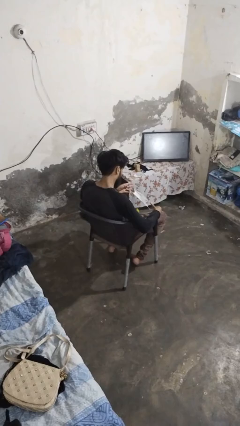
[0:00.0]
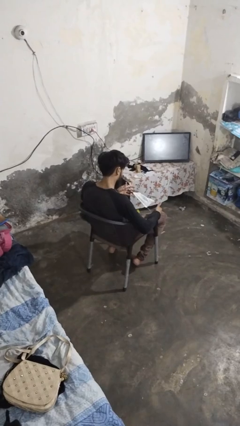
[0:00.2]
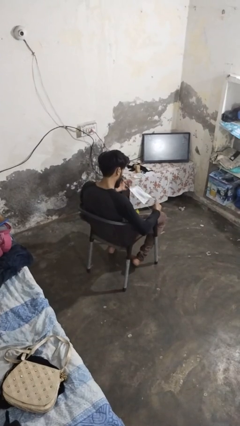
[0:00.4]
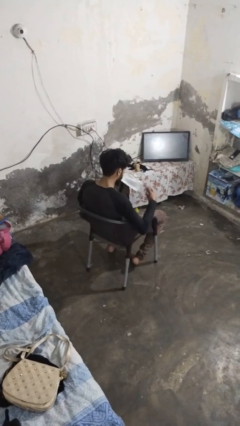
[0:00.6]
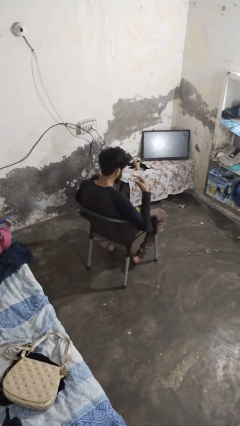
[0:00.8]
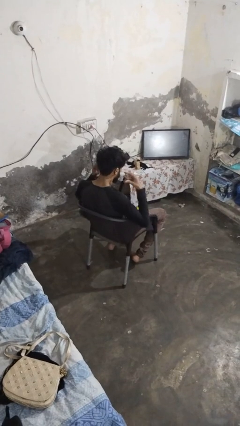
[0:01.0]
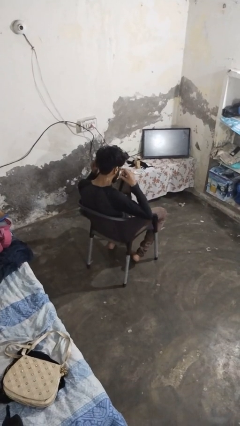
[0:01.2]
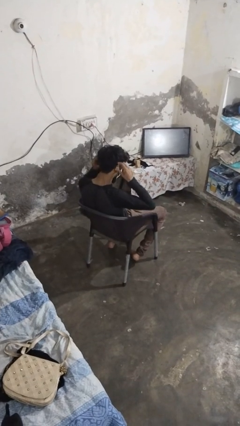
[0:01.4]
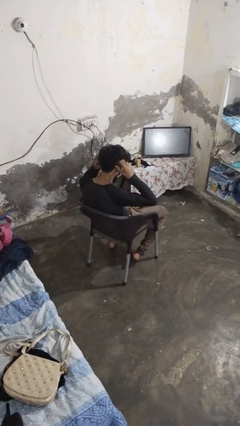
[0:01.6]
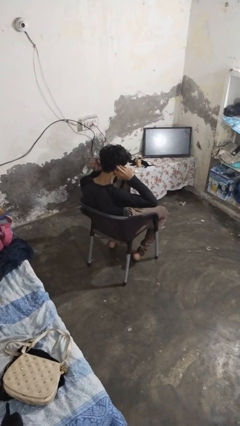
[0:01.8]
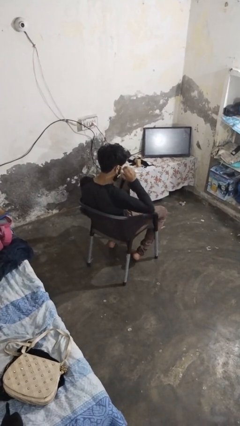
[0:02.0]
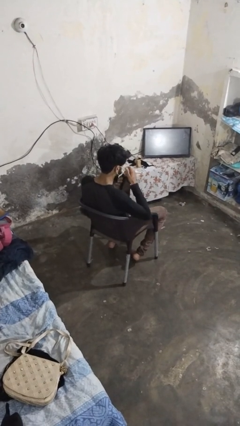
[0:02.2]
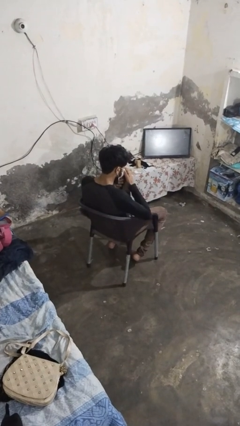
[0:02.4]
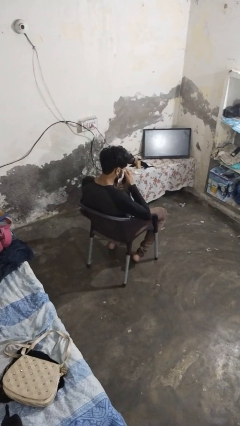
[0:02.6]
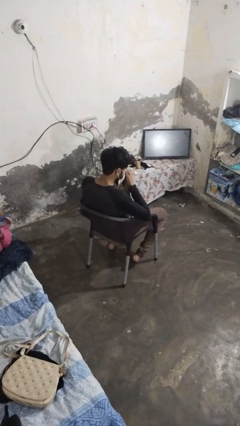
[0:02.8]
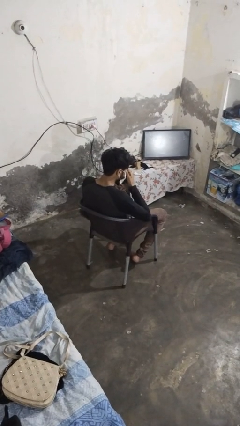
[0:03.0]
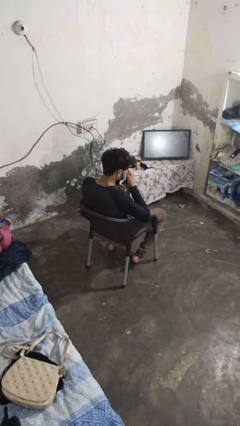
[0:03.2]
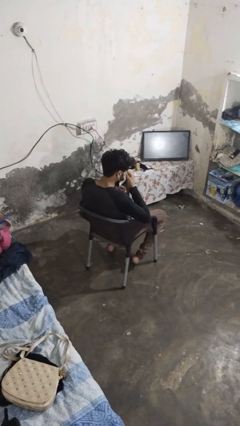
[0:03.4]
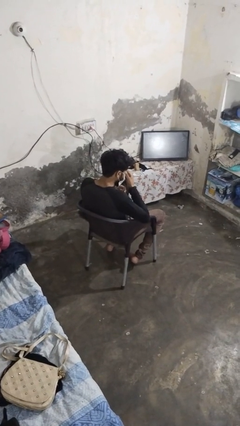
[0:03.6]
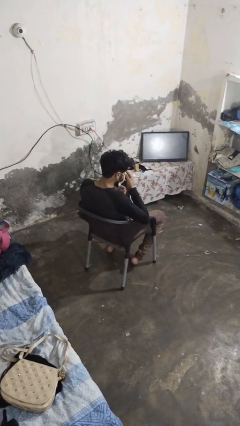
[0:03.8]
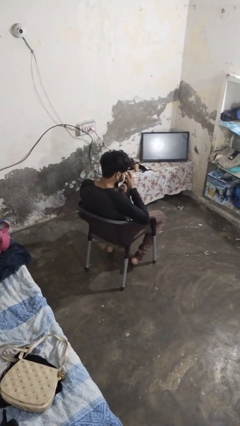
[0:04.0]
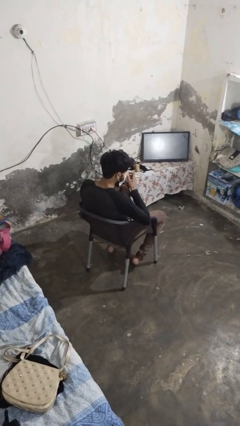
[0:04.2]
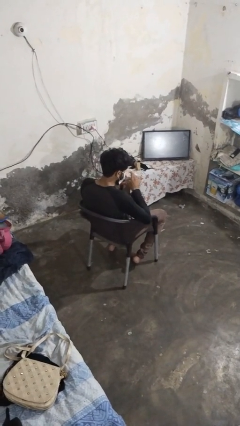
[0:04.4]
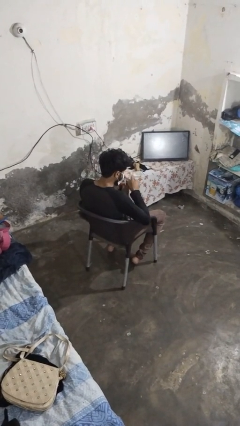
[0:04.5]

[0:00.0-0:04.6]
person puts on facemask

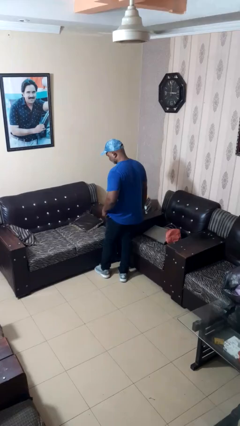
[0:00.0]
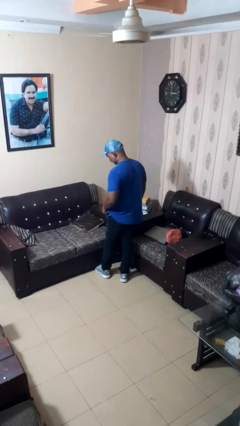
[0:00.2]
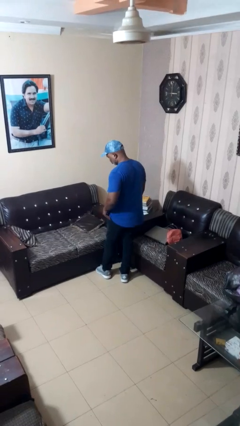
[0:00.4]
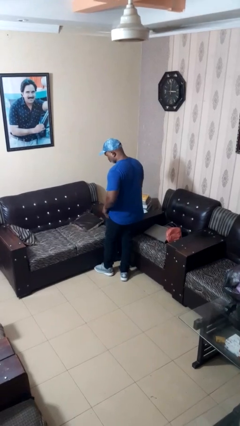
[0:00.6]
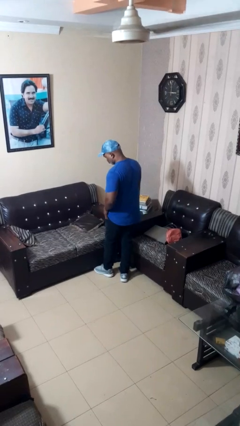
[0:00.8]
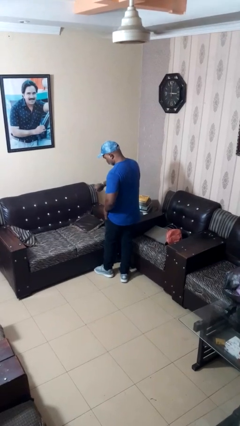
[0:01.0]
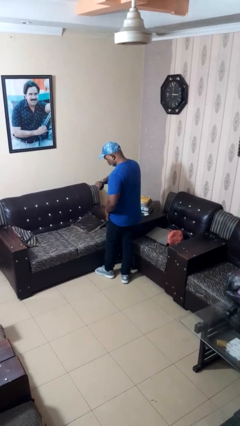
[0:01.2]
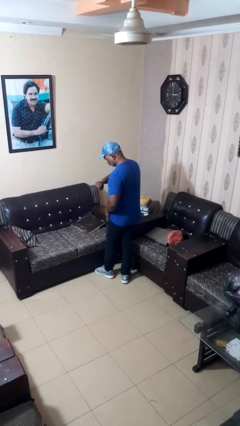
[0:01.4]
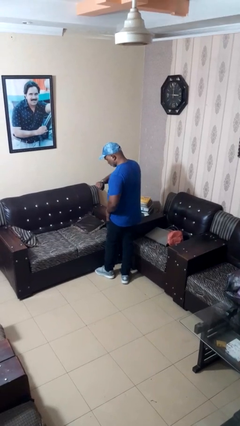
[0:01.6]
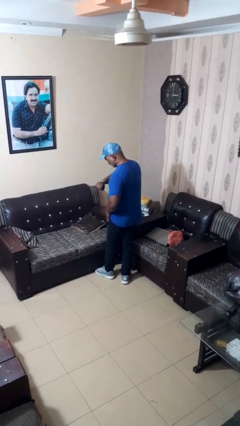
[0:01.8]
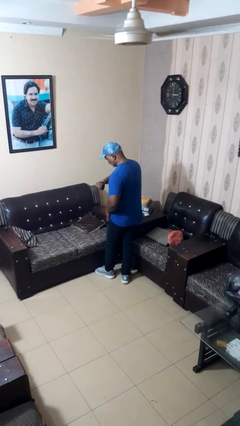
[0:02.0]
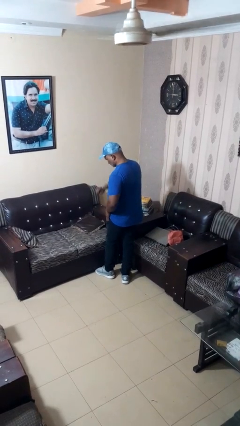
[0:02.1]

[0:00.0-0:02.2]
person looks at wristwatch

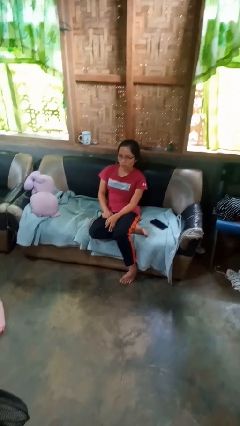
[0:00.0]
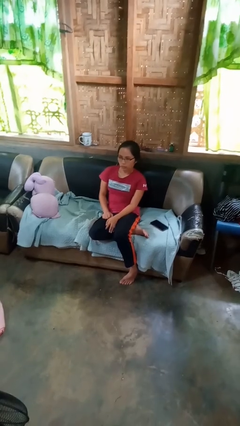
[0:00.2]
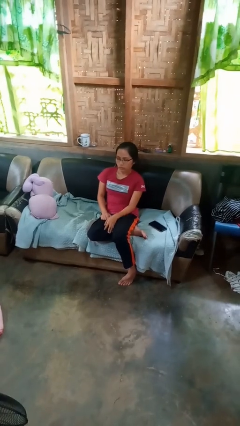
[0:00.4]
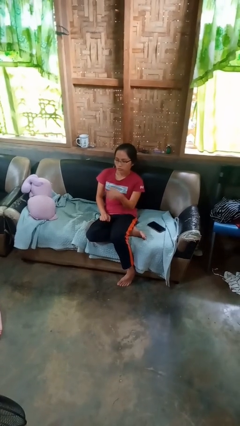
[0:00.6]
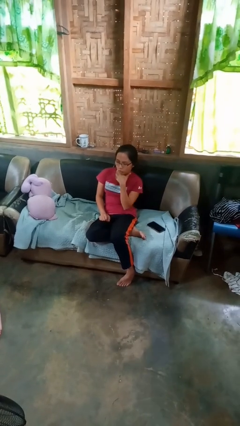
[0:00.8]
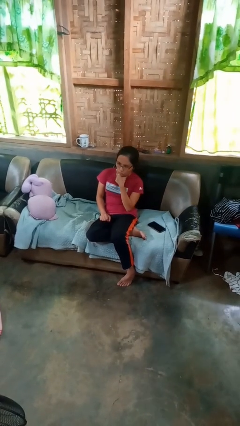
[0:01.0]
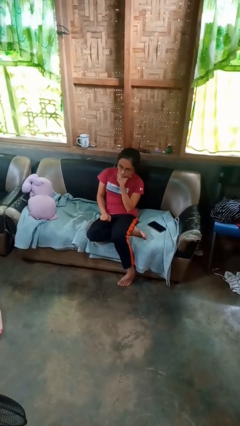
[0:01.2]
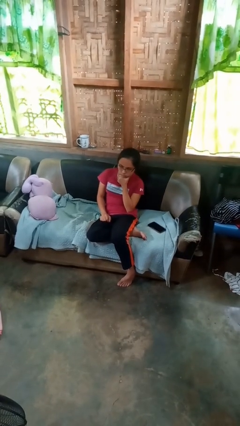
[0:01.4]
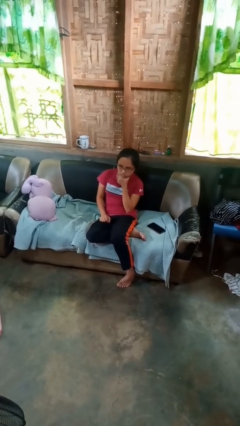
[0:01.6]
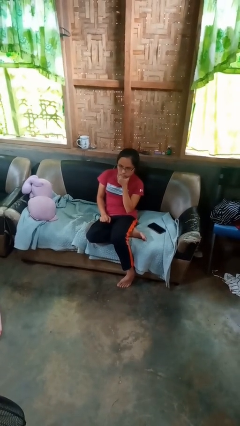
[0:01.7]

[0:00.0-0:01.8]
person strokes chin

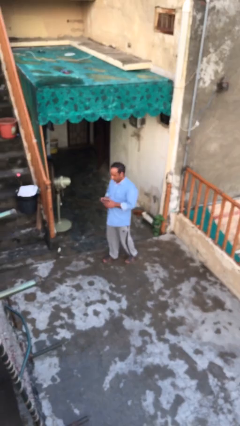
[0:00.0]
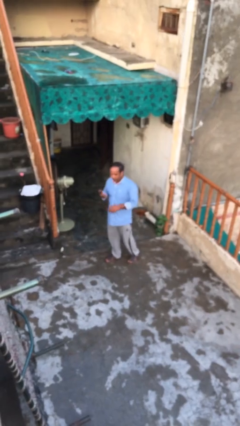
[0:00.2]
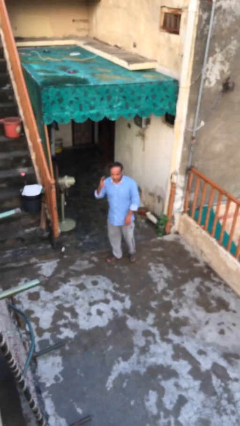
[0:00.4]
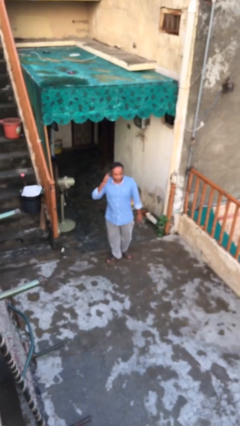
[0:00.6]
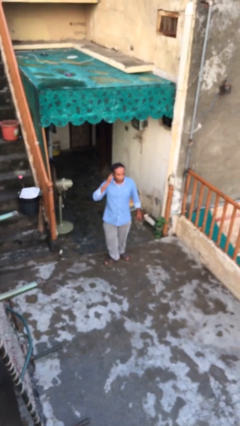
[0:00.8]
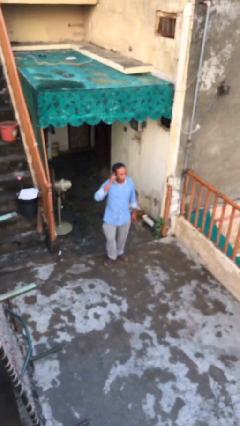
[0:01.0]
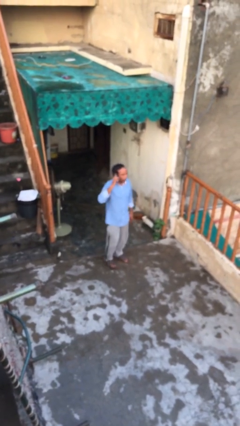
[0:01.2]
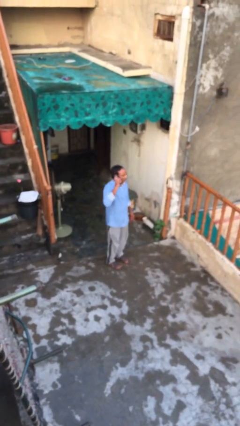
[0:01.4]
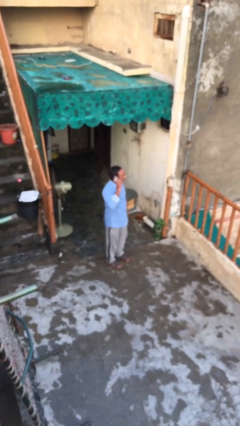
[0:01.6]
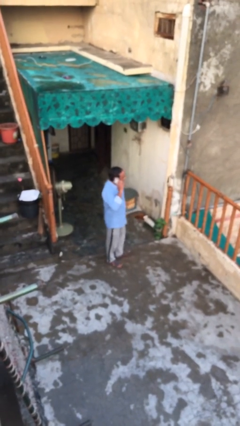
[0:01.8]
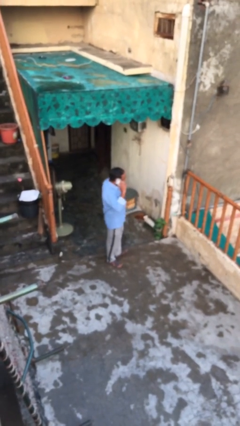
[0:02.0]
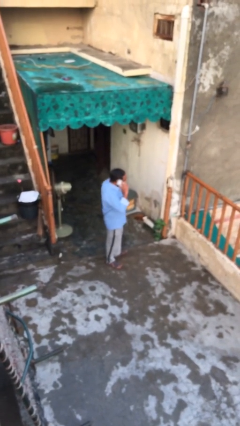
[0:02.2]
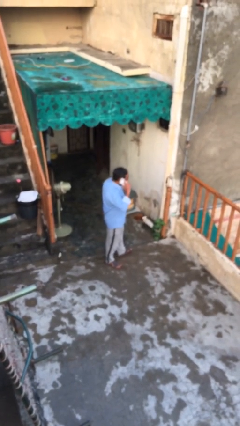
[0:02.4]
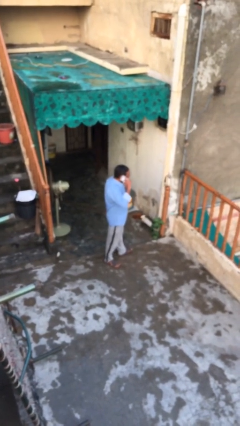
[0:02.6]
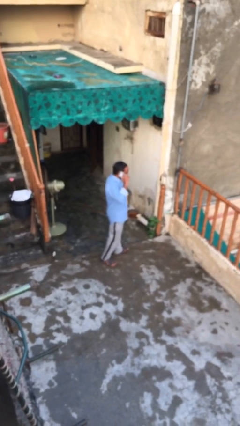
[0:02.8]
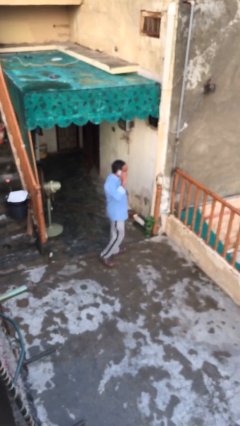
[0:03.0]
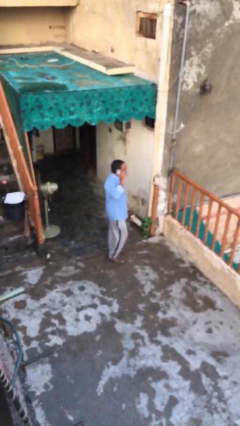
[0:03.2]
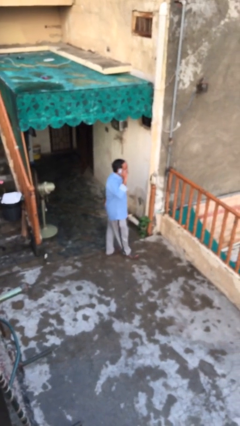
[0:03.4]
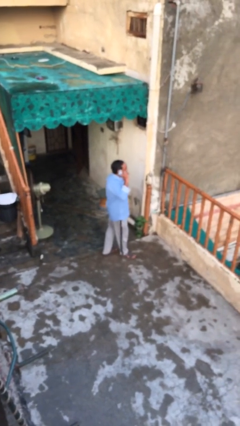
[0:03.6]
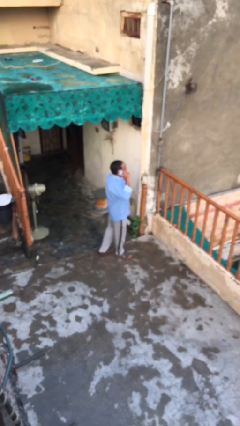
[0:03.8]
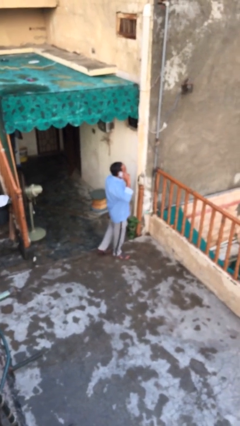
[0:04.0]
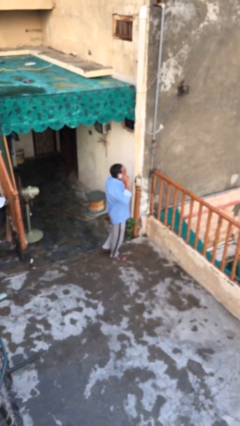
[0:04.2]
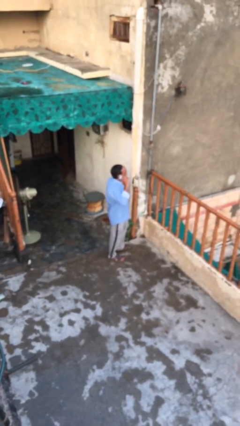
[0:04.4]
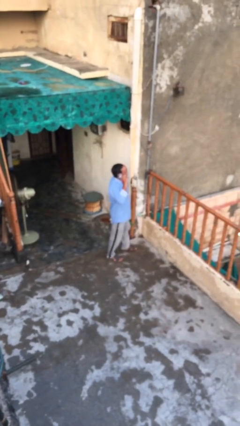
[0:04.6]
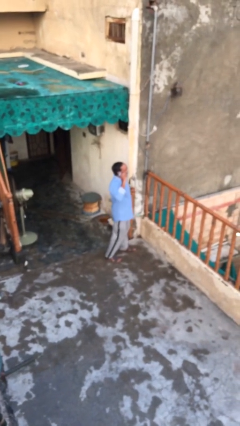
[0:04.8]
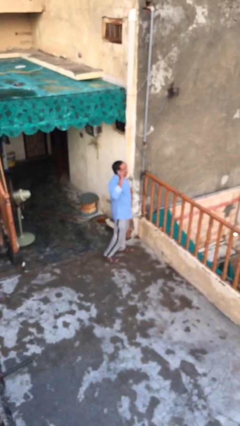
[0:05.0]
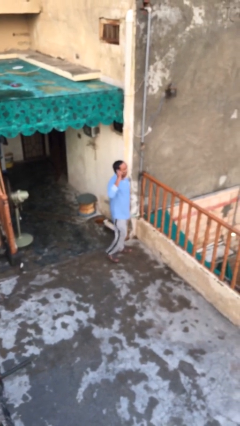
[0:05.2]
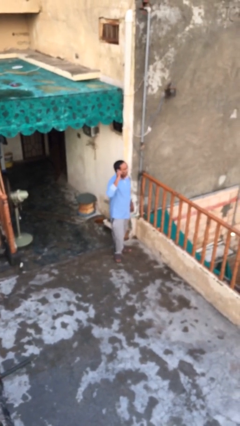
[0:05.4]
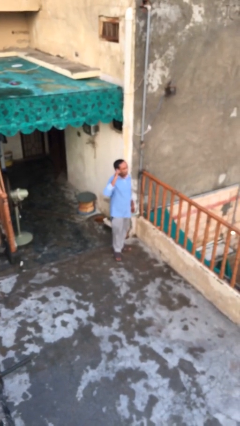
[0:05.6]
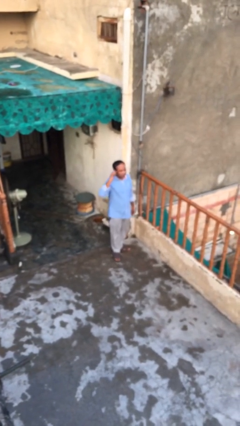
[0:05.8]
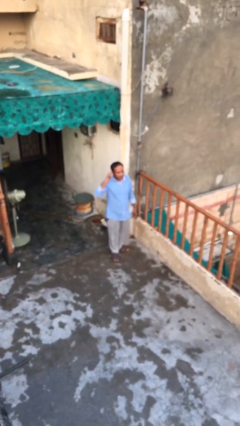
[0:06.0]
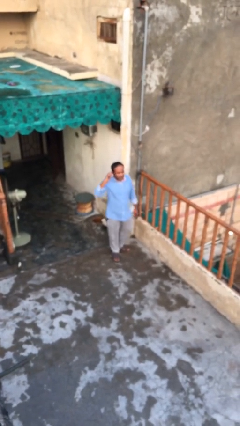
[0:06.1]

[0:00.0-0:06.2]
person talks on phone

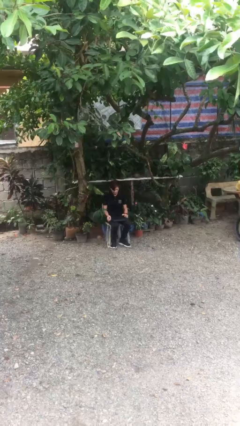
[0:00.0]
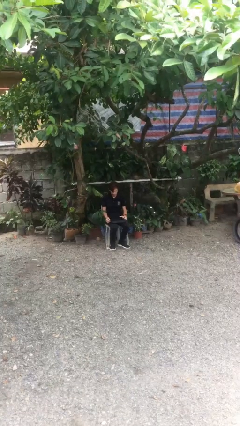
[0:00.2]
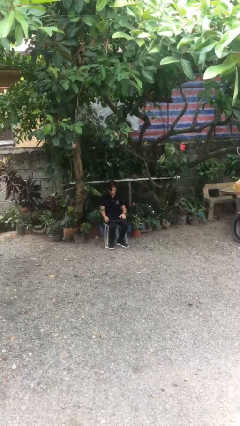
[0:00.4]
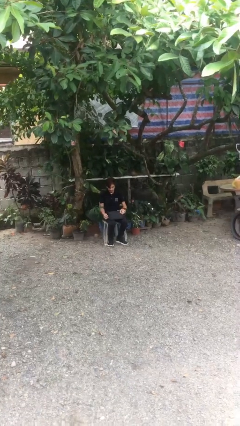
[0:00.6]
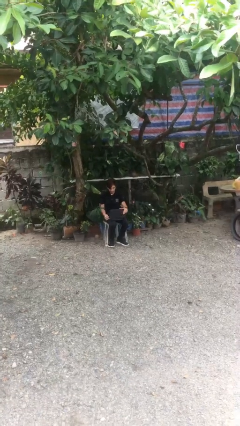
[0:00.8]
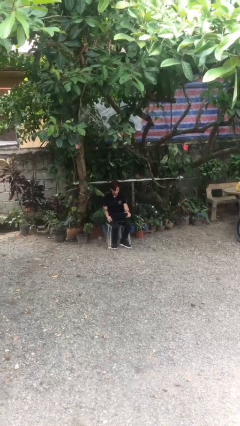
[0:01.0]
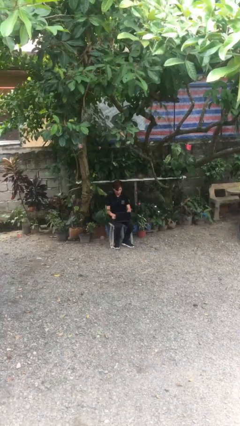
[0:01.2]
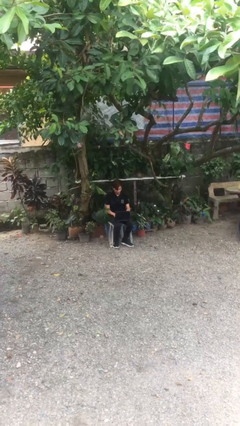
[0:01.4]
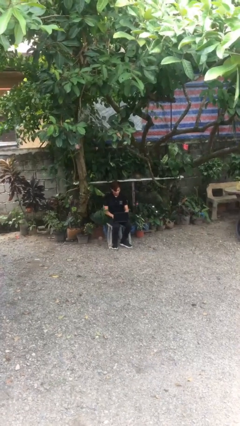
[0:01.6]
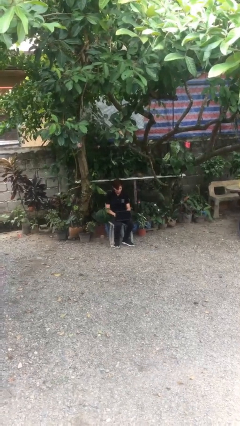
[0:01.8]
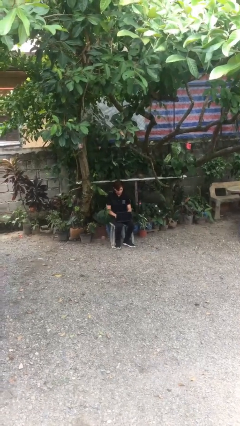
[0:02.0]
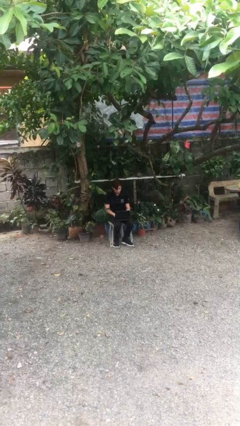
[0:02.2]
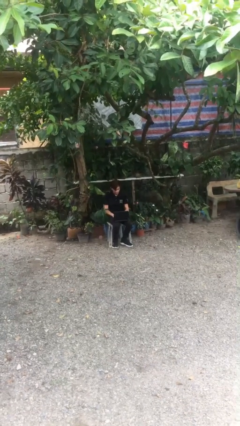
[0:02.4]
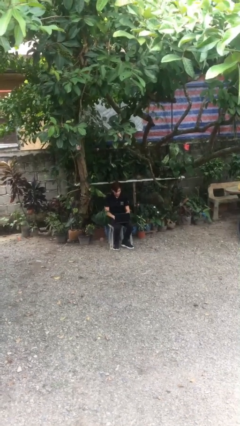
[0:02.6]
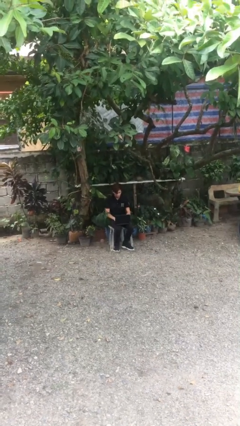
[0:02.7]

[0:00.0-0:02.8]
person interacts with laptop
